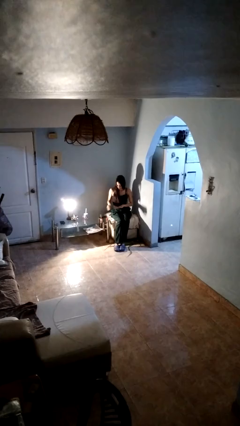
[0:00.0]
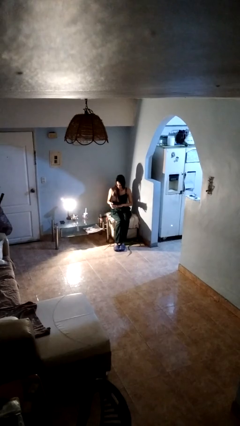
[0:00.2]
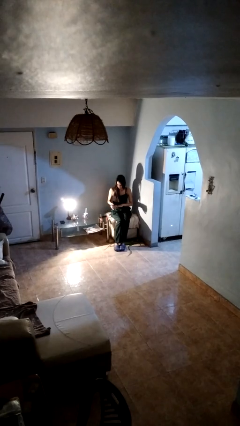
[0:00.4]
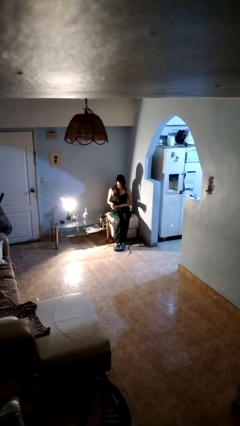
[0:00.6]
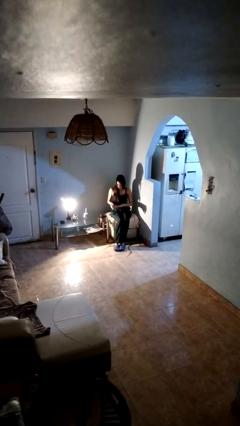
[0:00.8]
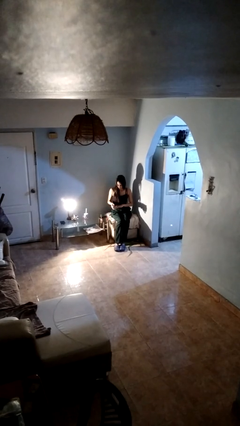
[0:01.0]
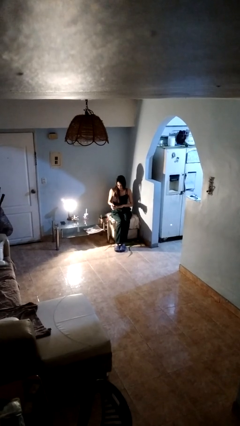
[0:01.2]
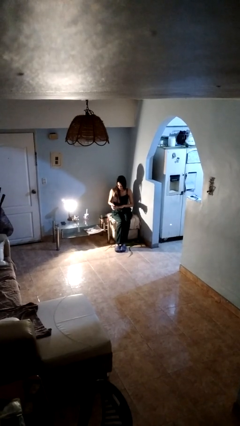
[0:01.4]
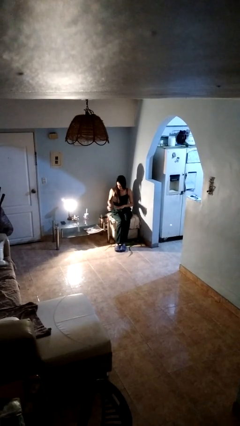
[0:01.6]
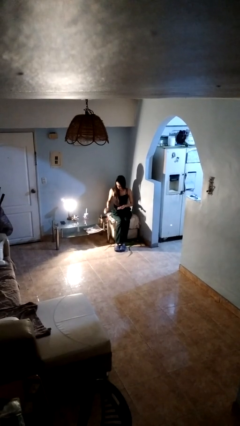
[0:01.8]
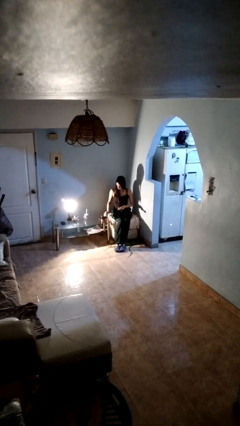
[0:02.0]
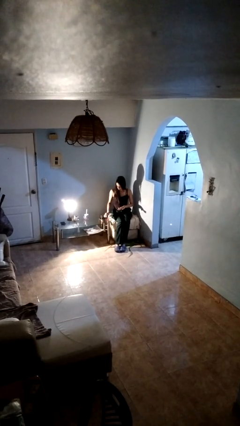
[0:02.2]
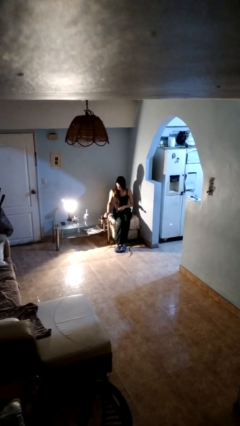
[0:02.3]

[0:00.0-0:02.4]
person paints fingernails

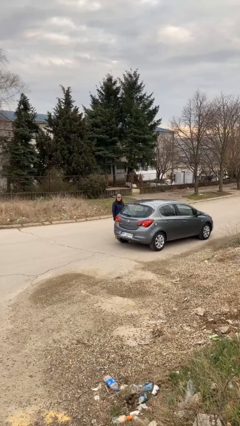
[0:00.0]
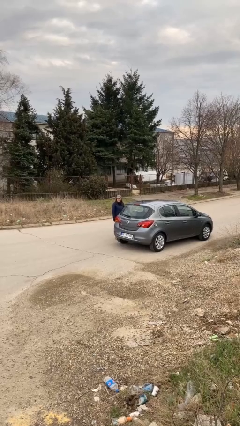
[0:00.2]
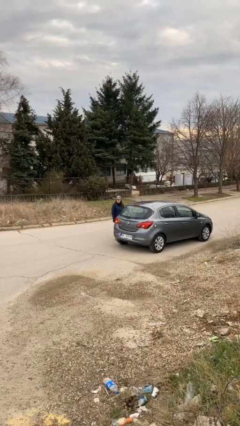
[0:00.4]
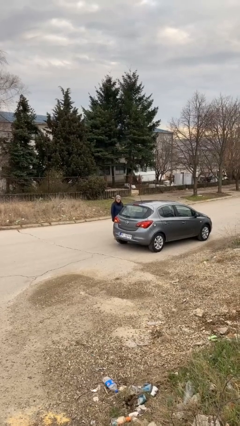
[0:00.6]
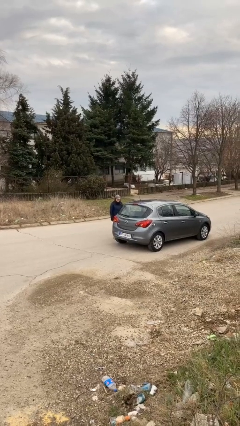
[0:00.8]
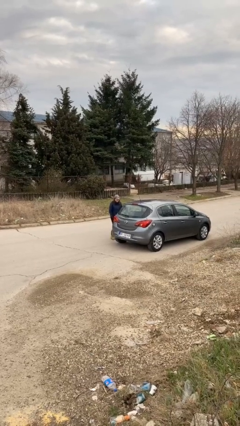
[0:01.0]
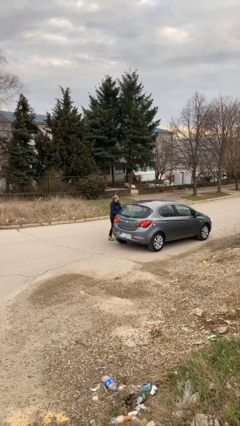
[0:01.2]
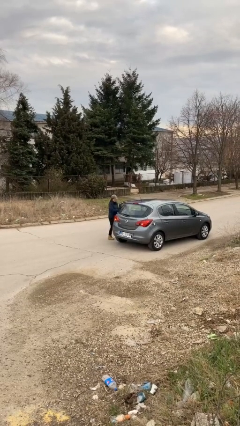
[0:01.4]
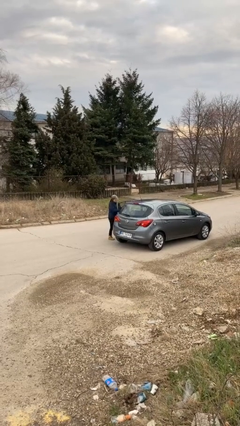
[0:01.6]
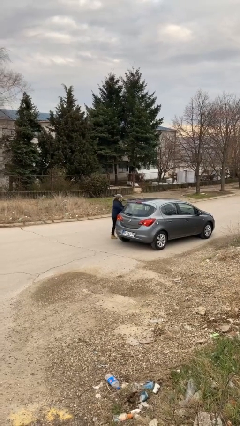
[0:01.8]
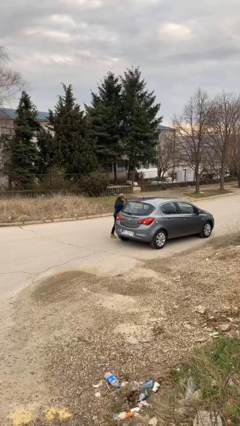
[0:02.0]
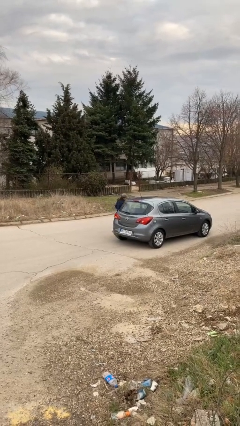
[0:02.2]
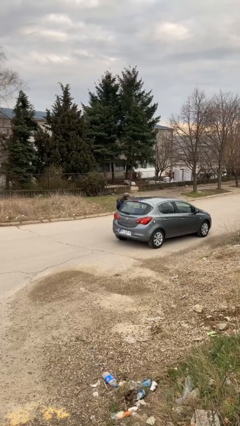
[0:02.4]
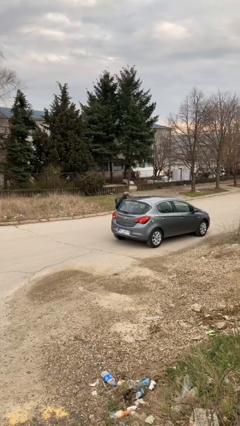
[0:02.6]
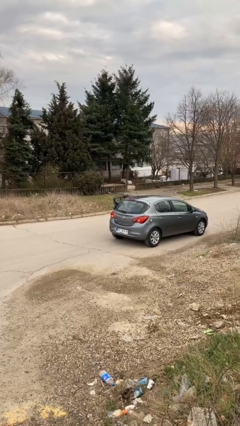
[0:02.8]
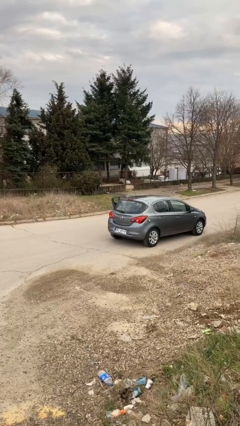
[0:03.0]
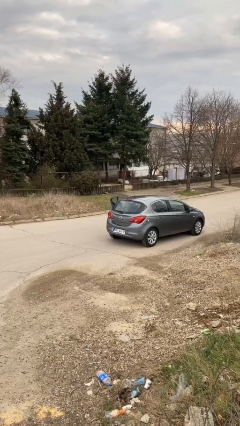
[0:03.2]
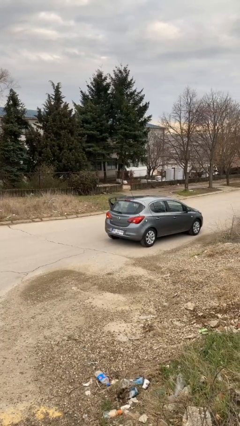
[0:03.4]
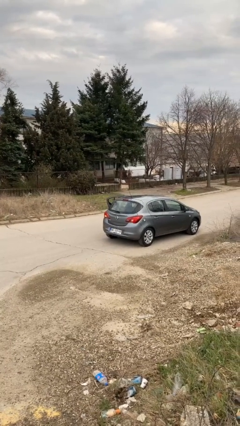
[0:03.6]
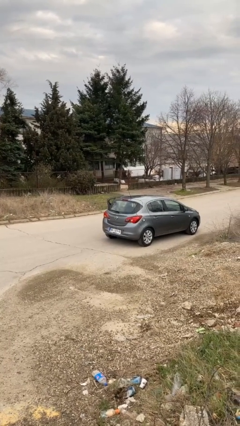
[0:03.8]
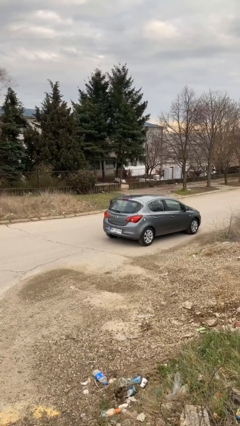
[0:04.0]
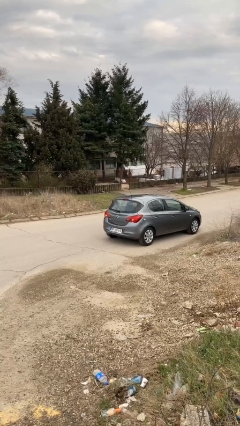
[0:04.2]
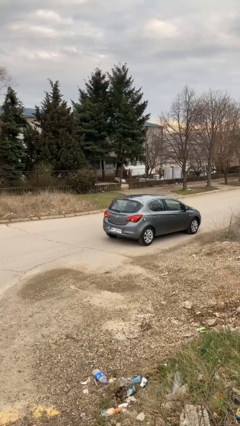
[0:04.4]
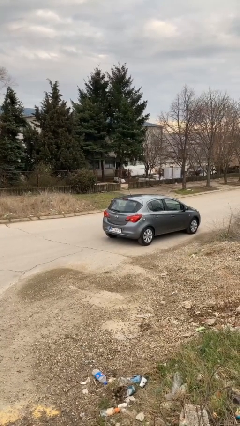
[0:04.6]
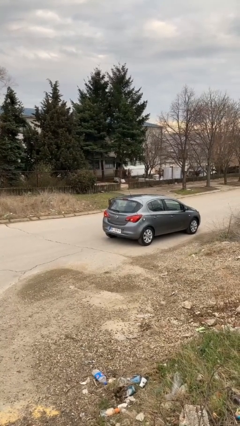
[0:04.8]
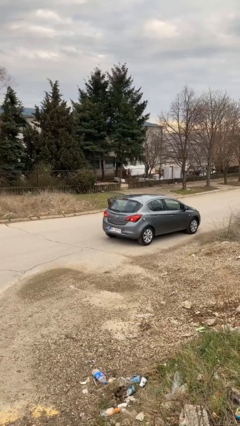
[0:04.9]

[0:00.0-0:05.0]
car picks up person

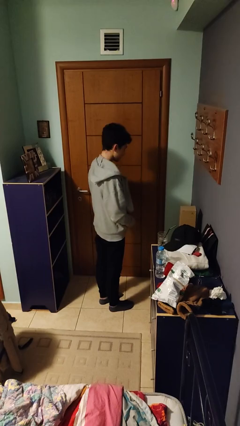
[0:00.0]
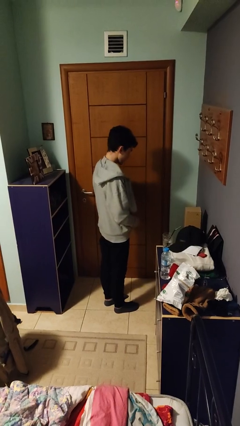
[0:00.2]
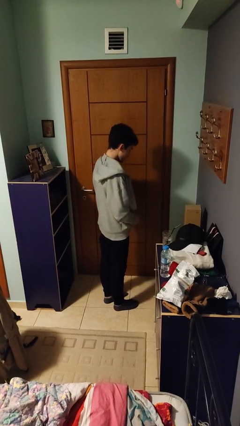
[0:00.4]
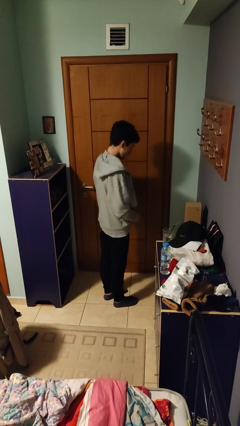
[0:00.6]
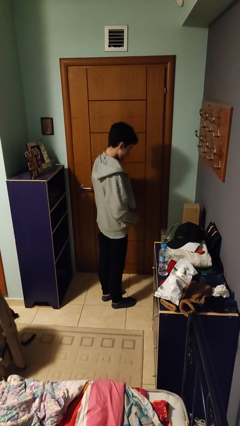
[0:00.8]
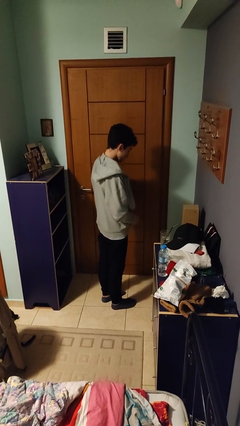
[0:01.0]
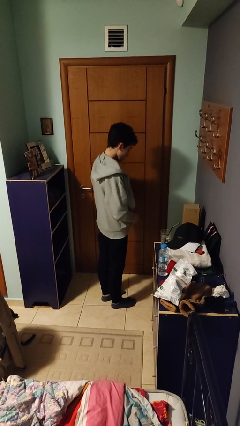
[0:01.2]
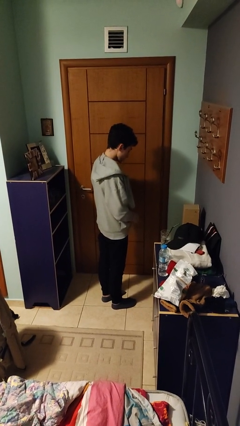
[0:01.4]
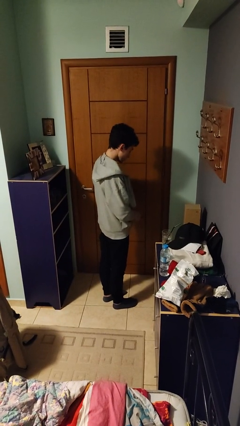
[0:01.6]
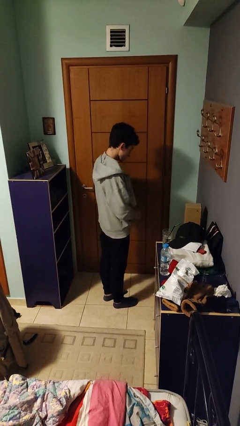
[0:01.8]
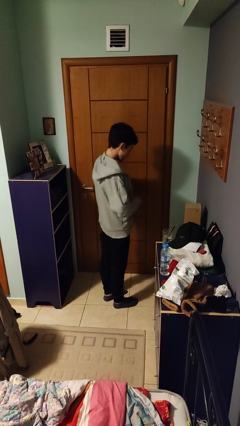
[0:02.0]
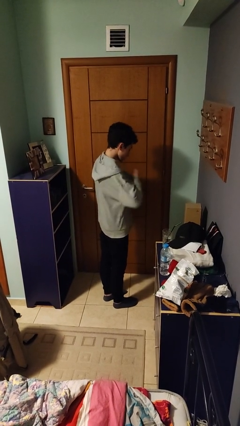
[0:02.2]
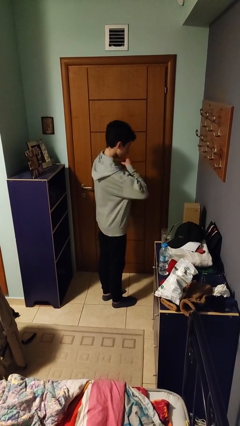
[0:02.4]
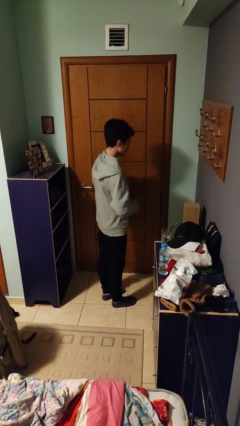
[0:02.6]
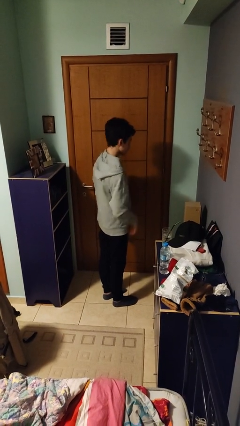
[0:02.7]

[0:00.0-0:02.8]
person zips up jacket

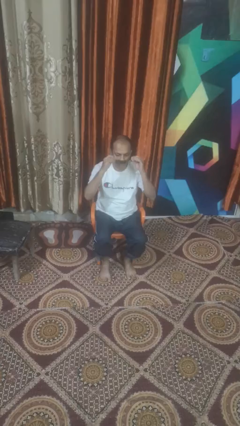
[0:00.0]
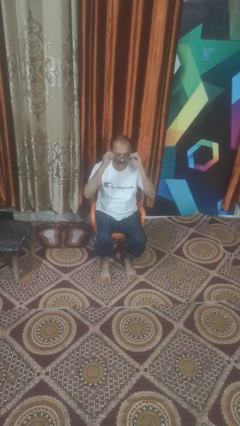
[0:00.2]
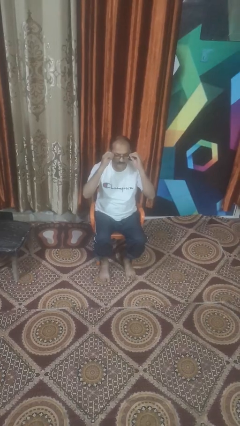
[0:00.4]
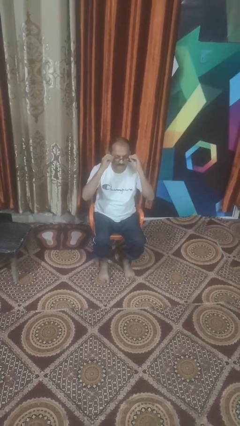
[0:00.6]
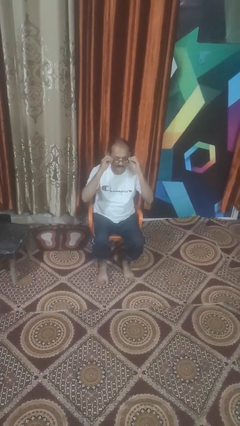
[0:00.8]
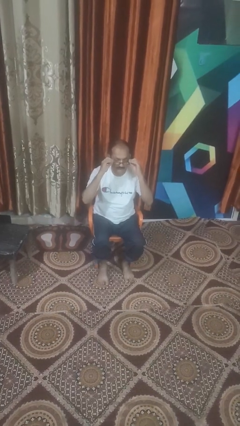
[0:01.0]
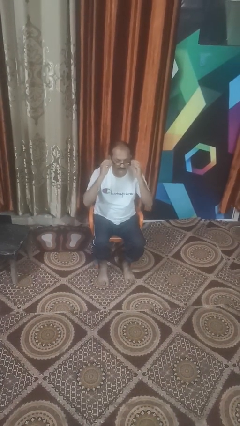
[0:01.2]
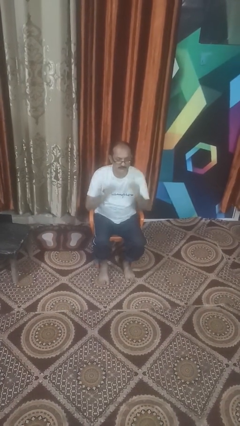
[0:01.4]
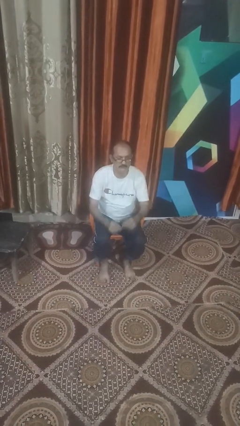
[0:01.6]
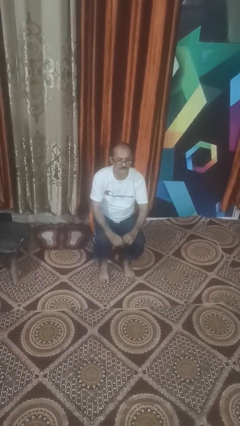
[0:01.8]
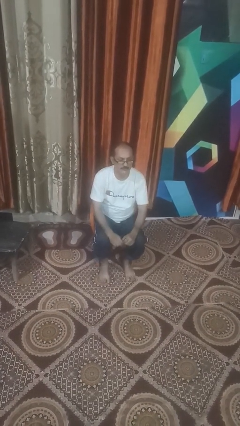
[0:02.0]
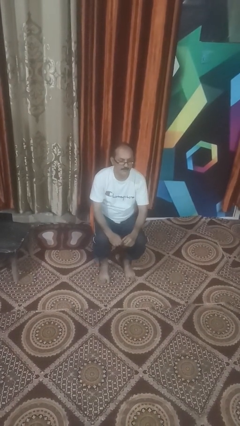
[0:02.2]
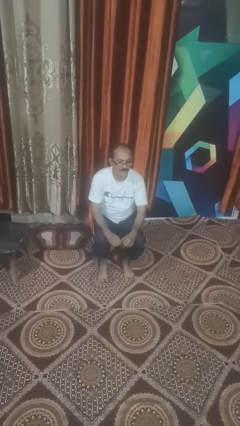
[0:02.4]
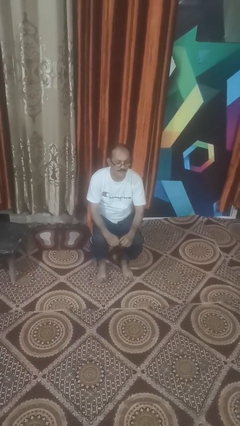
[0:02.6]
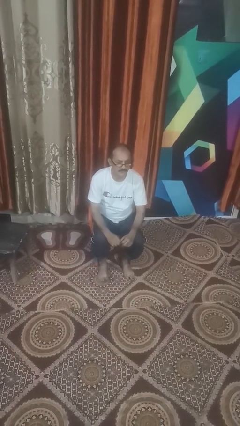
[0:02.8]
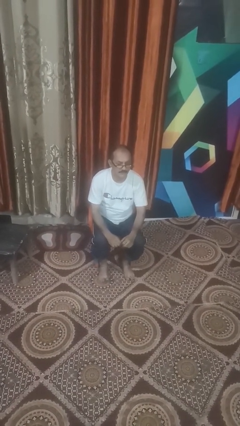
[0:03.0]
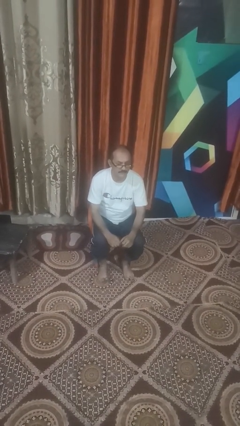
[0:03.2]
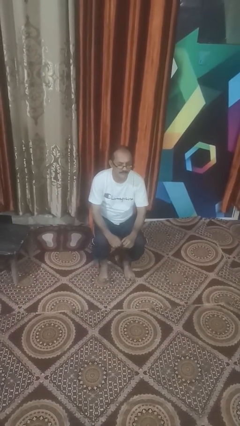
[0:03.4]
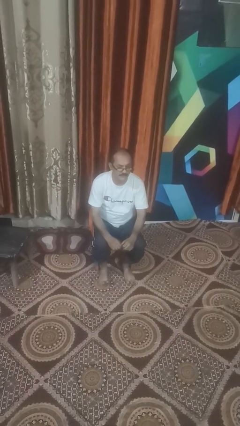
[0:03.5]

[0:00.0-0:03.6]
person puts on glasses

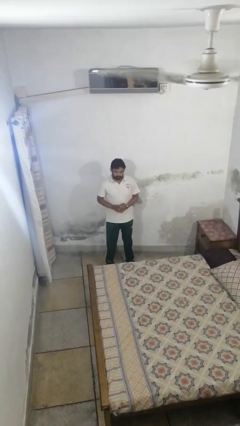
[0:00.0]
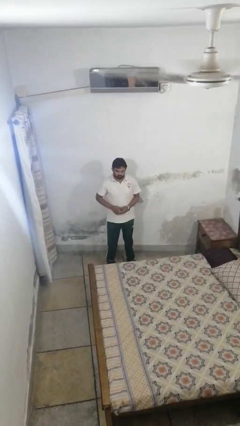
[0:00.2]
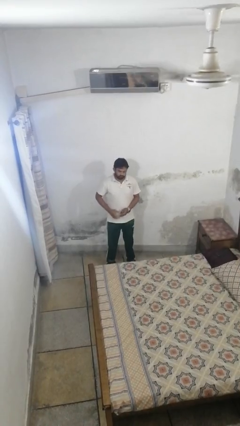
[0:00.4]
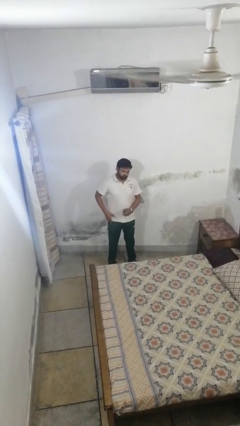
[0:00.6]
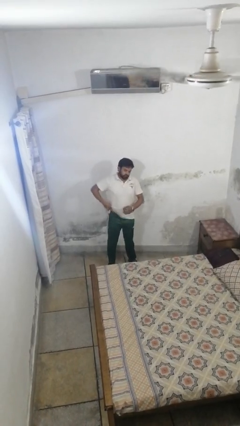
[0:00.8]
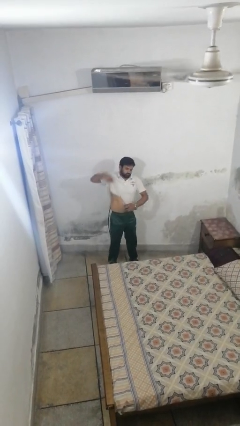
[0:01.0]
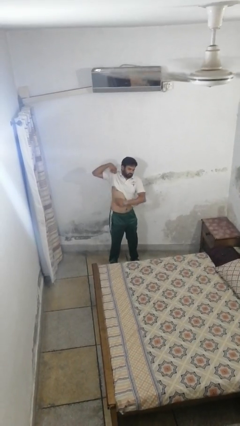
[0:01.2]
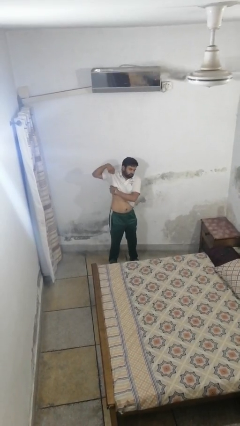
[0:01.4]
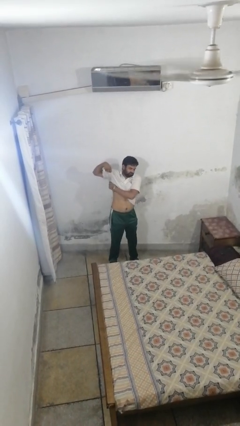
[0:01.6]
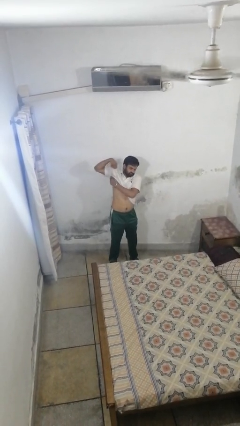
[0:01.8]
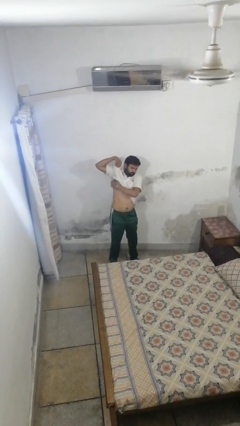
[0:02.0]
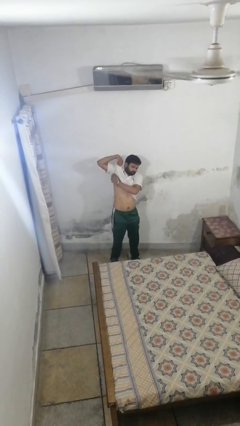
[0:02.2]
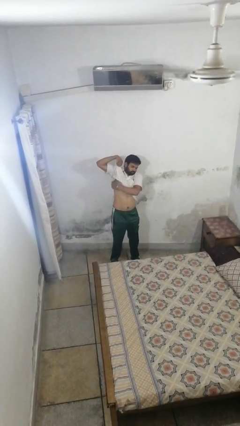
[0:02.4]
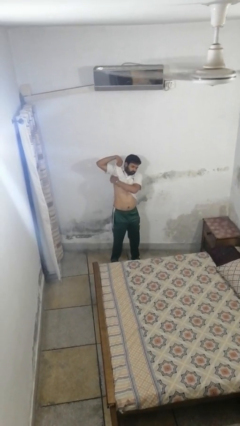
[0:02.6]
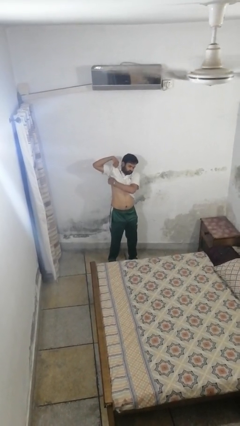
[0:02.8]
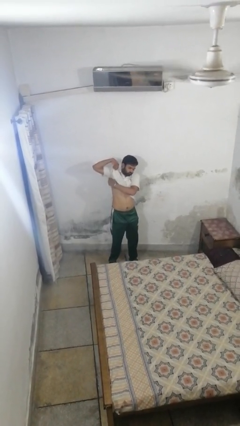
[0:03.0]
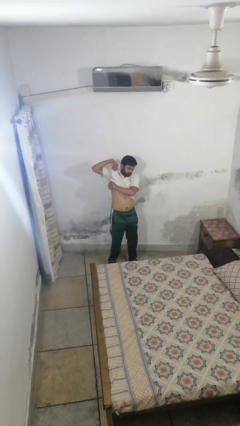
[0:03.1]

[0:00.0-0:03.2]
person applies deodorant

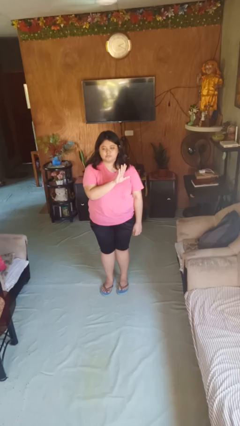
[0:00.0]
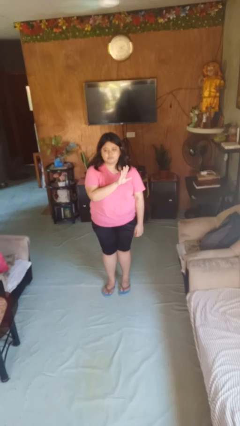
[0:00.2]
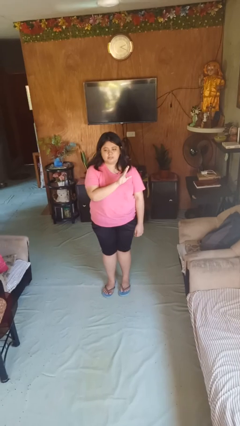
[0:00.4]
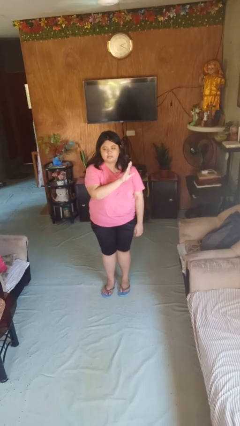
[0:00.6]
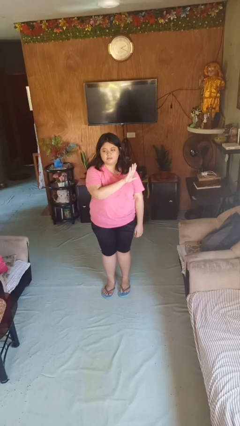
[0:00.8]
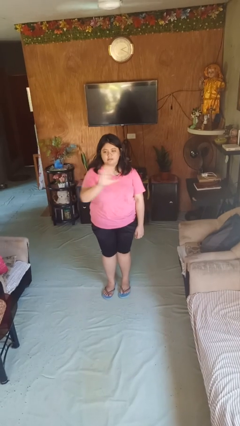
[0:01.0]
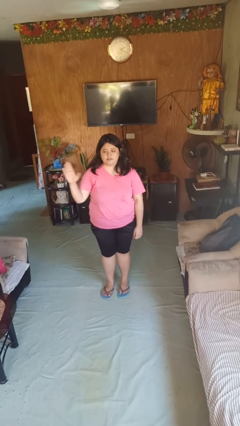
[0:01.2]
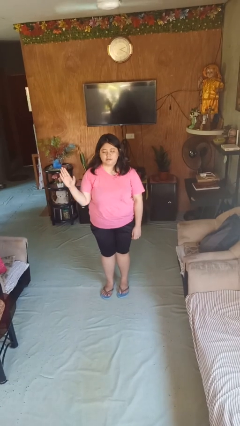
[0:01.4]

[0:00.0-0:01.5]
person gestures swipe right
